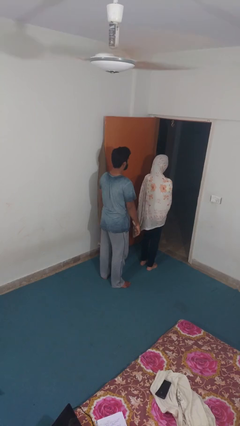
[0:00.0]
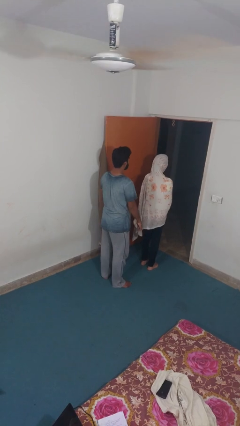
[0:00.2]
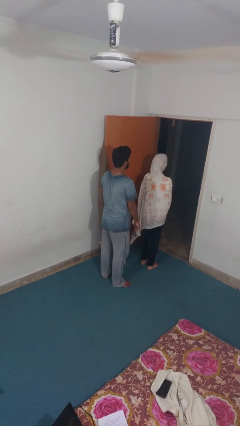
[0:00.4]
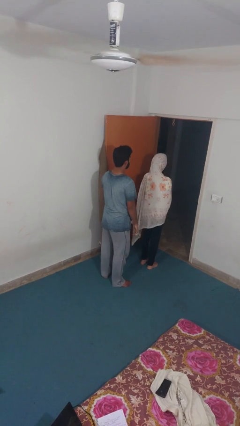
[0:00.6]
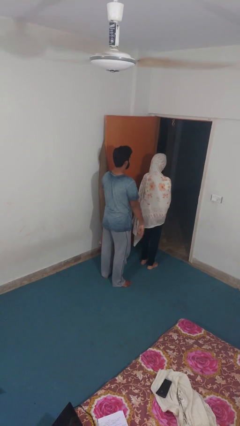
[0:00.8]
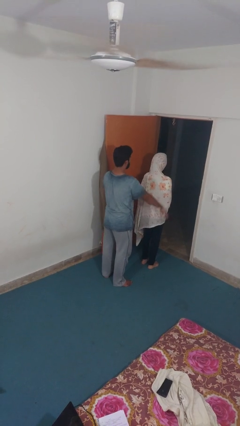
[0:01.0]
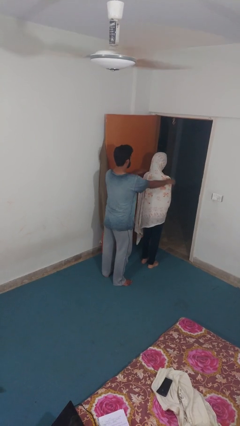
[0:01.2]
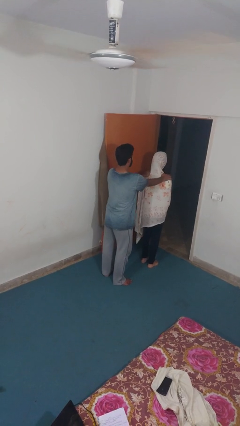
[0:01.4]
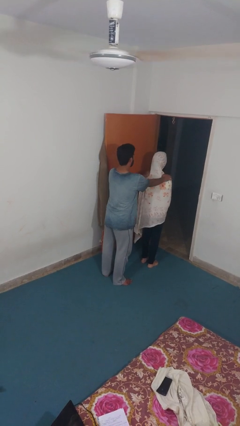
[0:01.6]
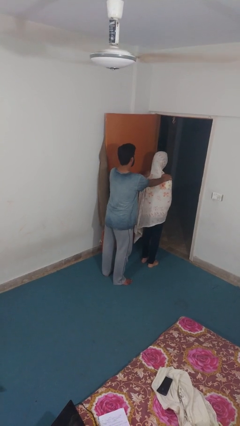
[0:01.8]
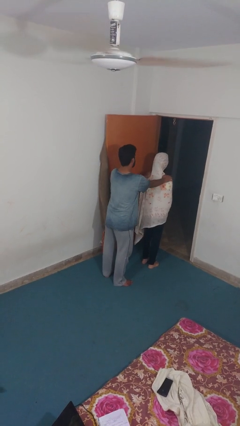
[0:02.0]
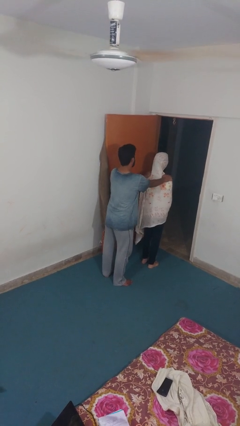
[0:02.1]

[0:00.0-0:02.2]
person grabs person by shoulder

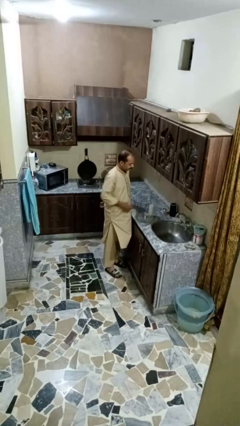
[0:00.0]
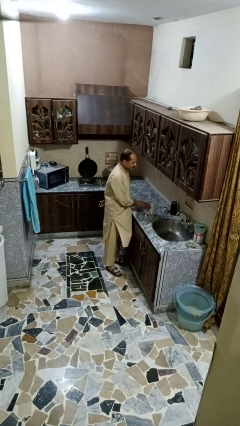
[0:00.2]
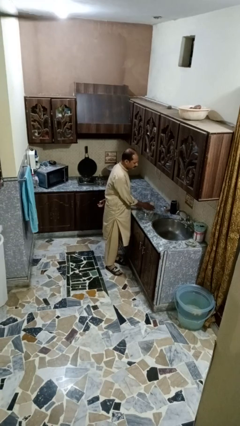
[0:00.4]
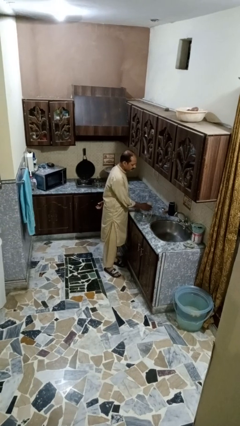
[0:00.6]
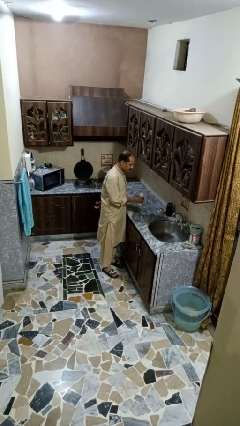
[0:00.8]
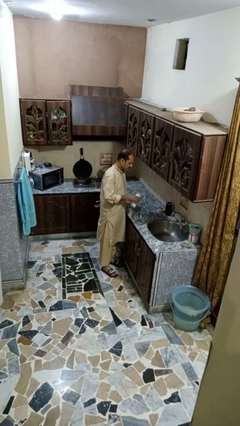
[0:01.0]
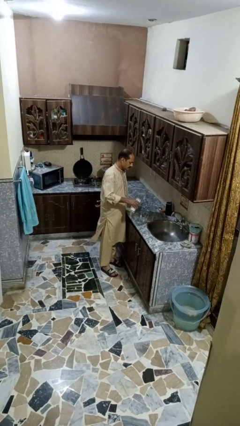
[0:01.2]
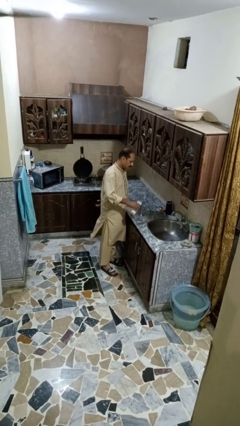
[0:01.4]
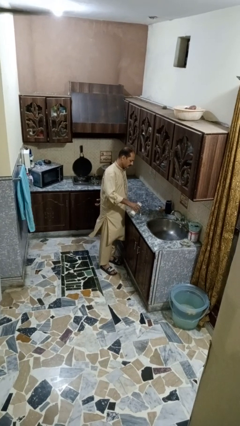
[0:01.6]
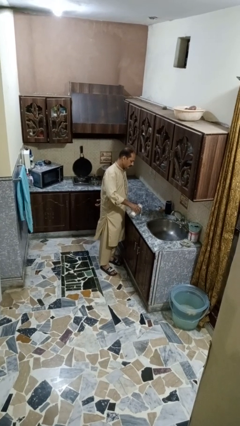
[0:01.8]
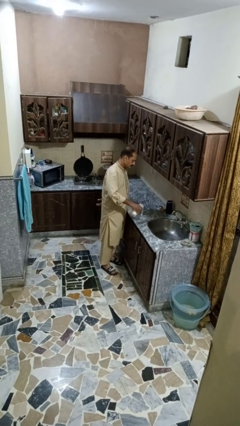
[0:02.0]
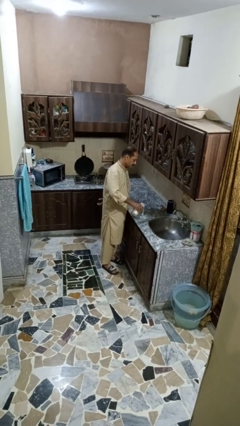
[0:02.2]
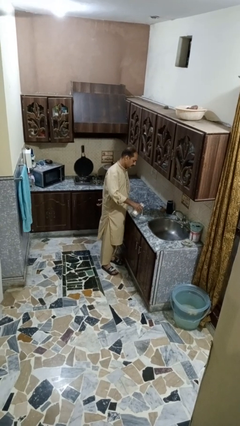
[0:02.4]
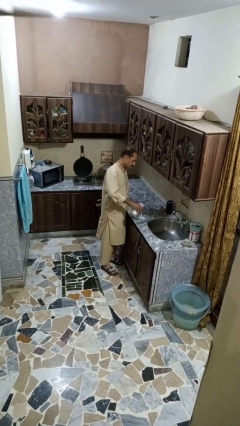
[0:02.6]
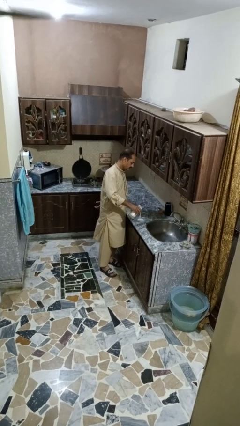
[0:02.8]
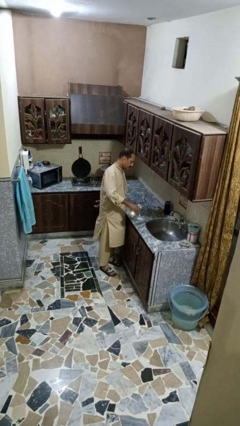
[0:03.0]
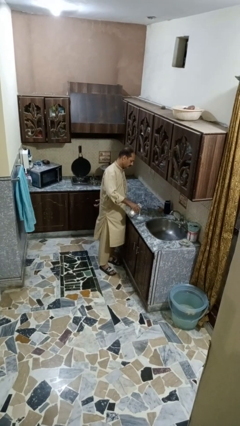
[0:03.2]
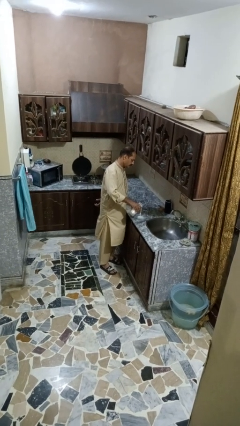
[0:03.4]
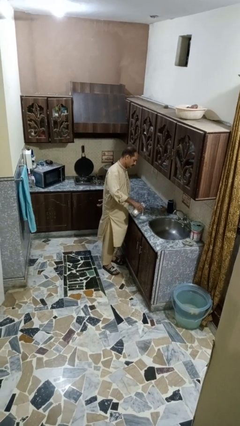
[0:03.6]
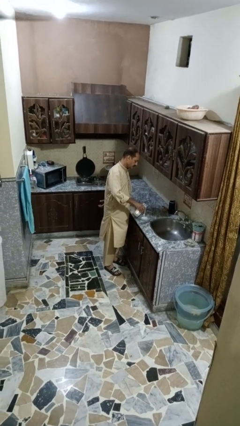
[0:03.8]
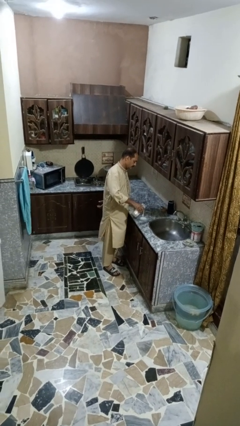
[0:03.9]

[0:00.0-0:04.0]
person pours into bowl

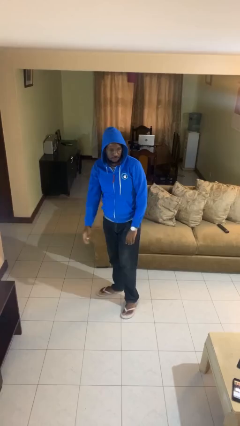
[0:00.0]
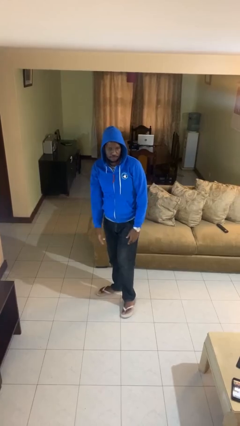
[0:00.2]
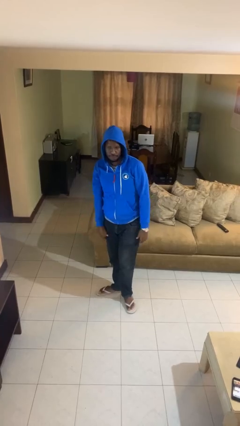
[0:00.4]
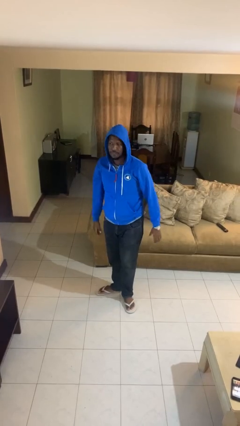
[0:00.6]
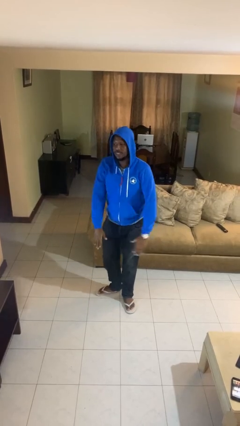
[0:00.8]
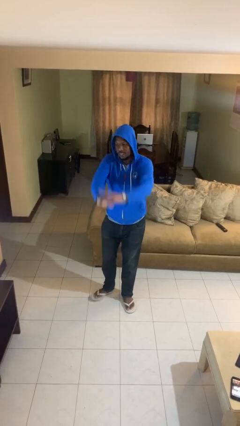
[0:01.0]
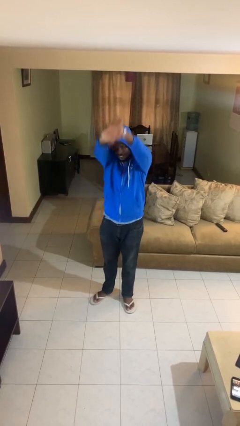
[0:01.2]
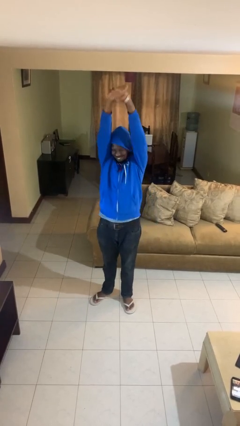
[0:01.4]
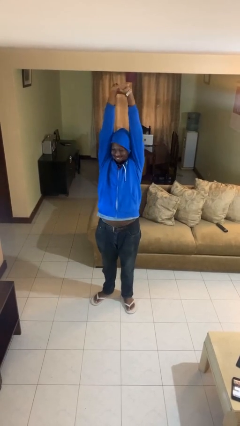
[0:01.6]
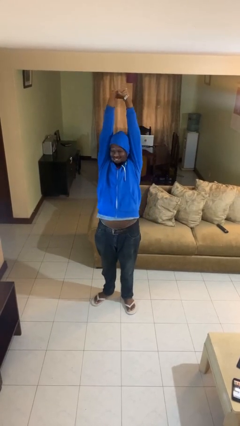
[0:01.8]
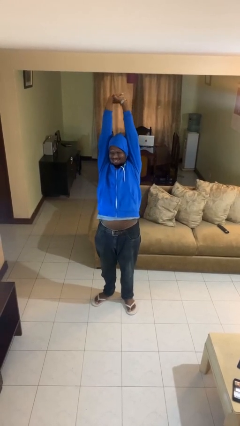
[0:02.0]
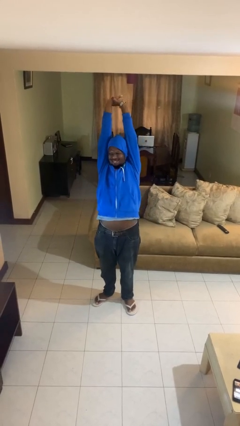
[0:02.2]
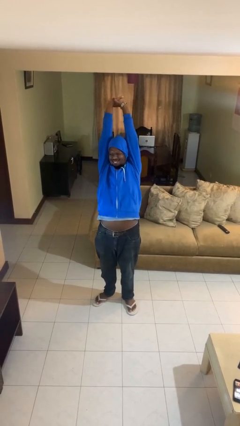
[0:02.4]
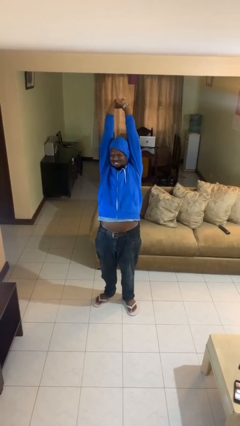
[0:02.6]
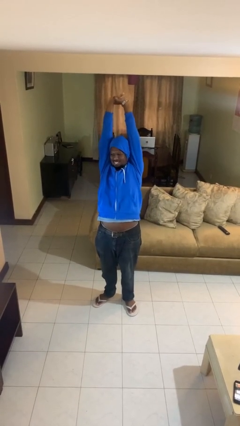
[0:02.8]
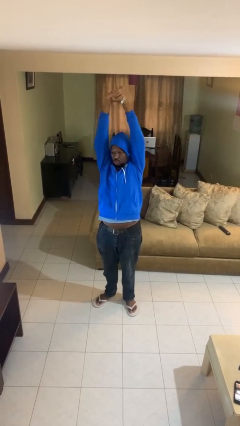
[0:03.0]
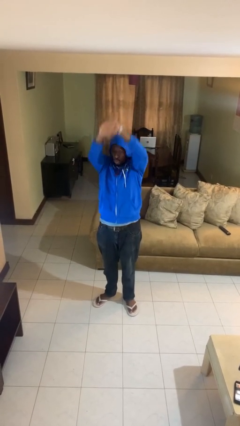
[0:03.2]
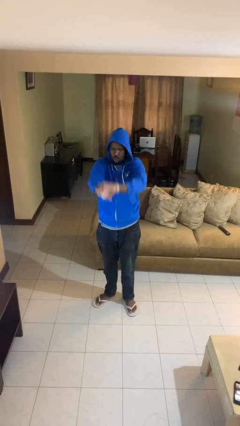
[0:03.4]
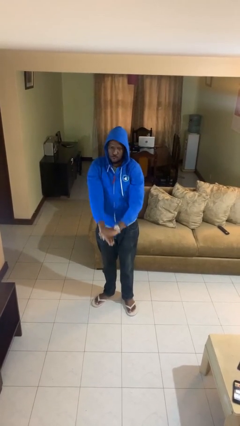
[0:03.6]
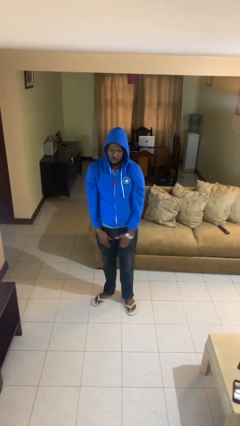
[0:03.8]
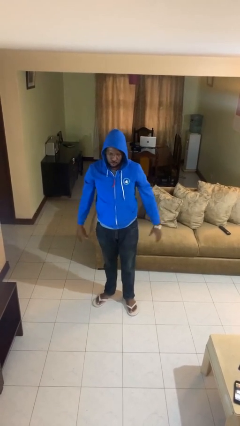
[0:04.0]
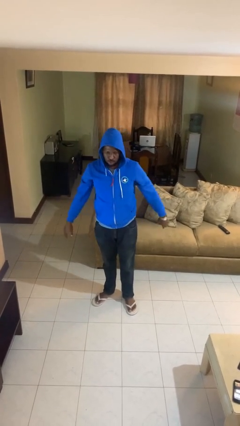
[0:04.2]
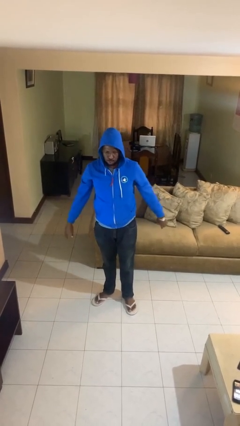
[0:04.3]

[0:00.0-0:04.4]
person stretches arms over head

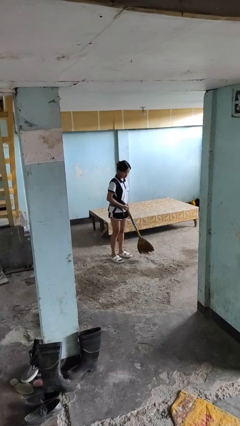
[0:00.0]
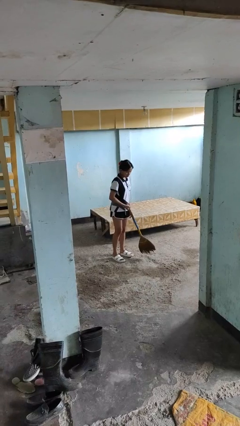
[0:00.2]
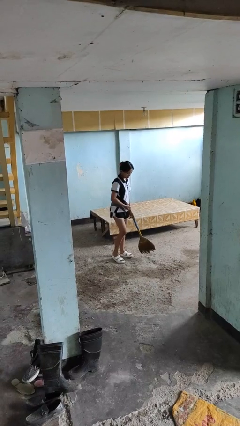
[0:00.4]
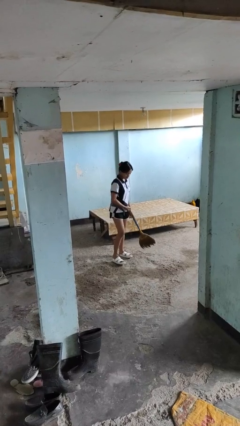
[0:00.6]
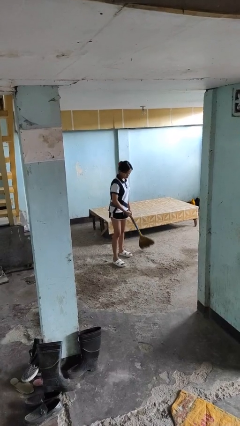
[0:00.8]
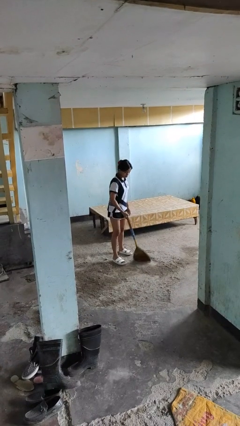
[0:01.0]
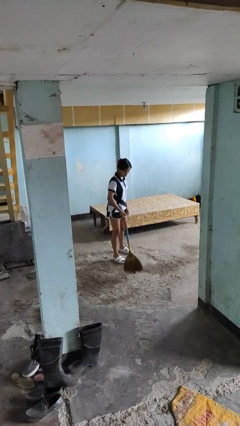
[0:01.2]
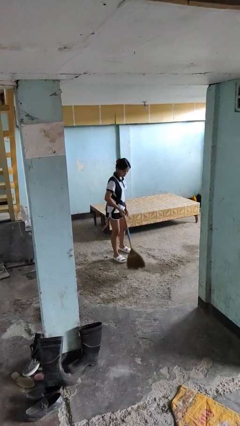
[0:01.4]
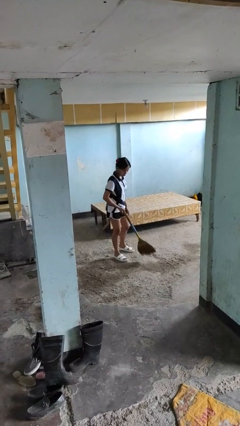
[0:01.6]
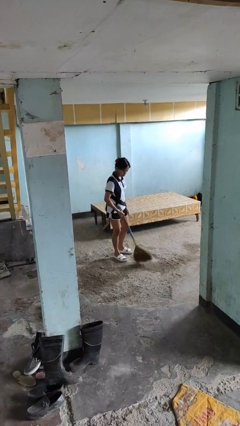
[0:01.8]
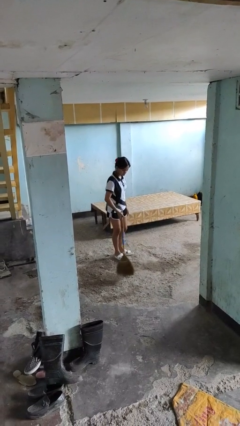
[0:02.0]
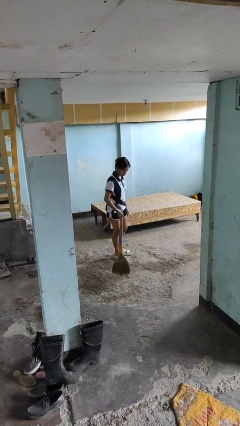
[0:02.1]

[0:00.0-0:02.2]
person sweeps floor

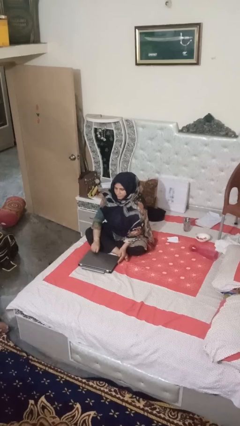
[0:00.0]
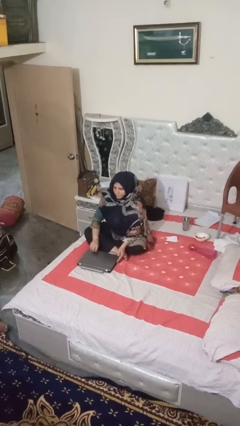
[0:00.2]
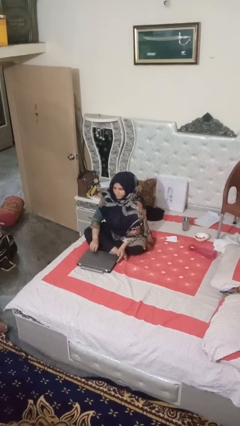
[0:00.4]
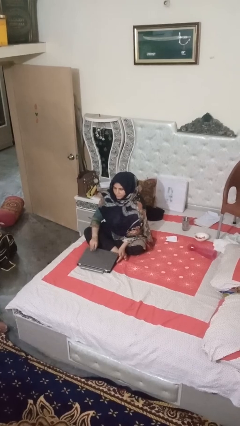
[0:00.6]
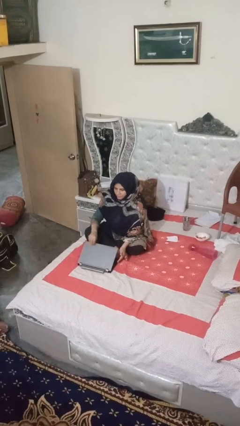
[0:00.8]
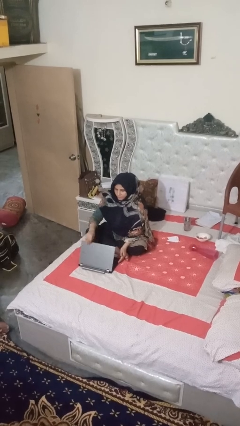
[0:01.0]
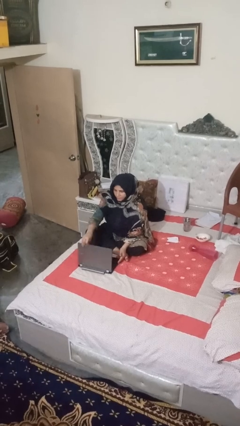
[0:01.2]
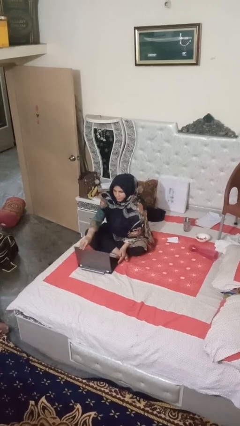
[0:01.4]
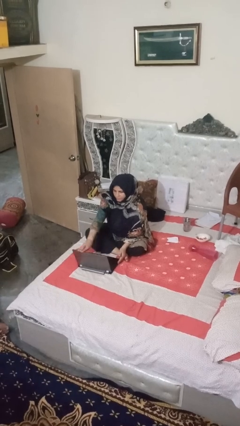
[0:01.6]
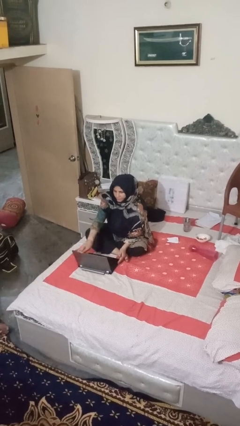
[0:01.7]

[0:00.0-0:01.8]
person opens laptop

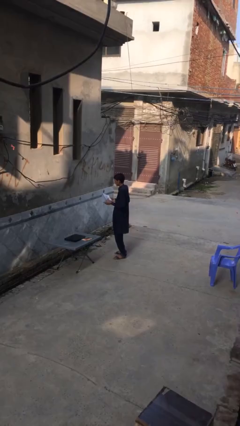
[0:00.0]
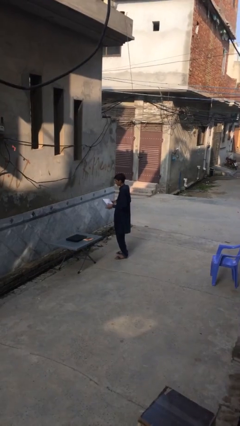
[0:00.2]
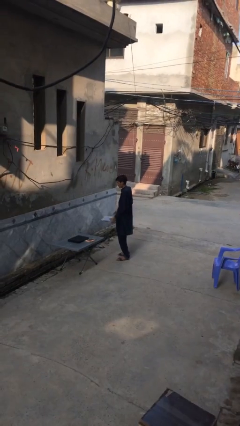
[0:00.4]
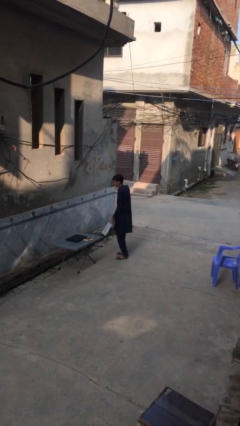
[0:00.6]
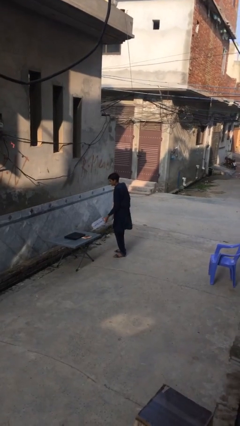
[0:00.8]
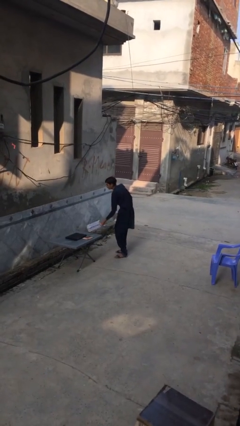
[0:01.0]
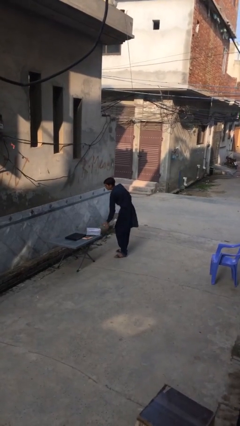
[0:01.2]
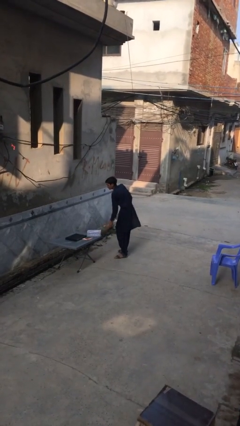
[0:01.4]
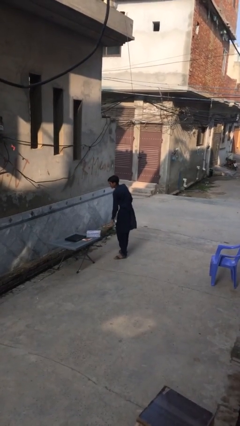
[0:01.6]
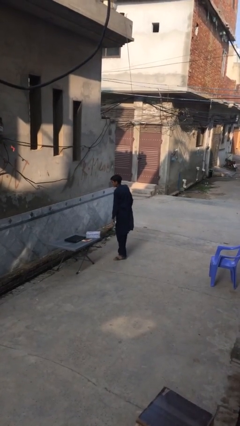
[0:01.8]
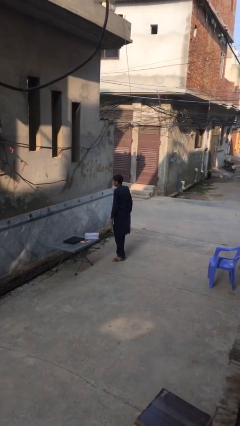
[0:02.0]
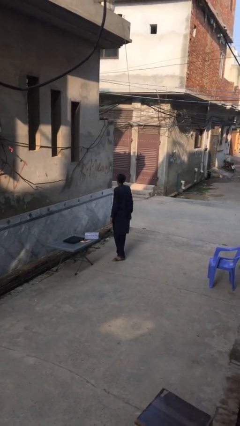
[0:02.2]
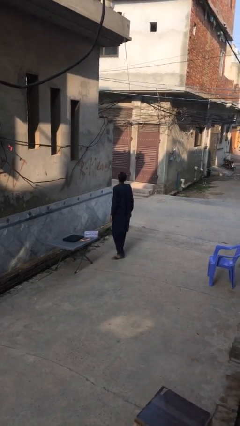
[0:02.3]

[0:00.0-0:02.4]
person puts down object on table

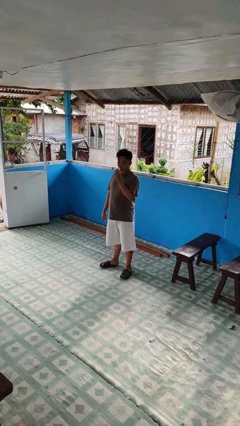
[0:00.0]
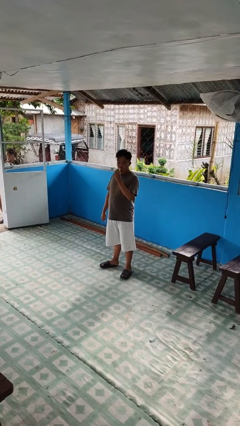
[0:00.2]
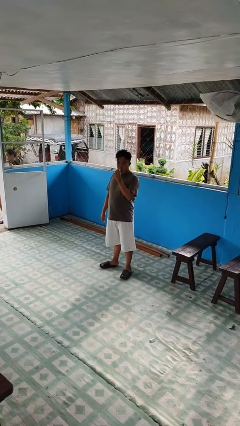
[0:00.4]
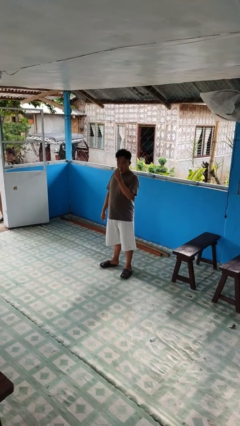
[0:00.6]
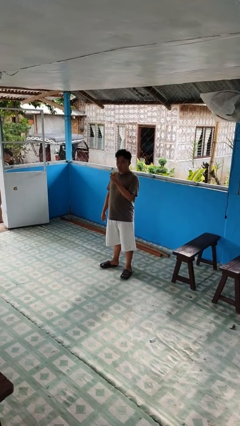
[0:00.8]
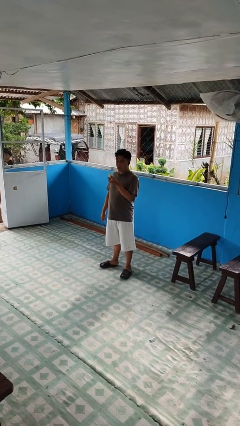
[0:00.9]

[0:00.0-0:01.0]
person eats banana
